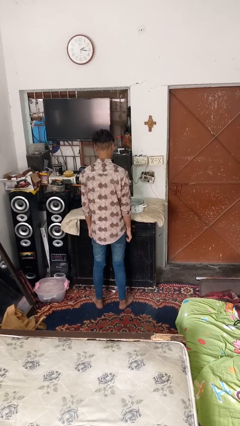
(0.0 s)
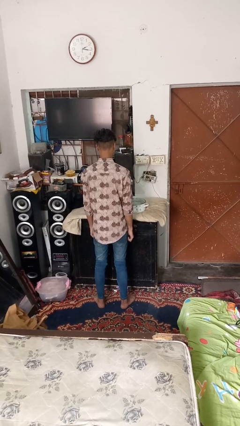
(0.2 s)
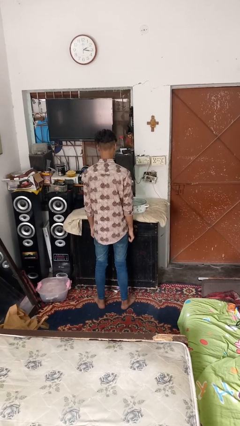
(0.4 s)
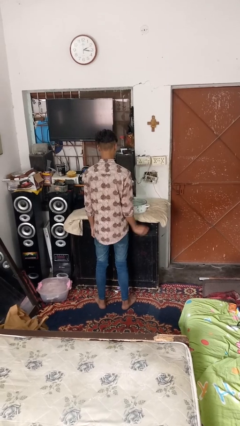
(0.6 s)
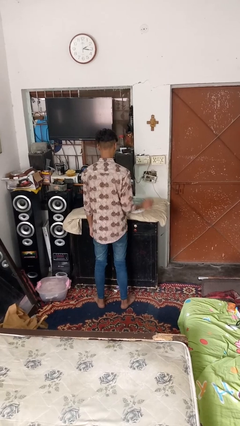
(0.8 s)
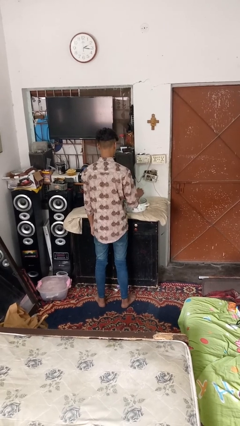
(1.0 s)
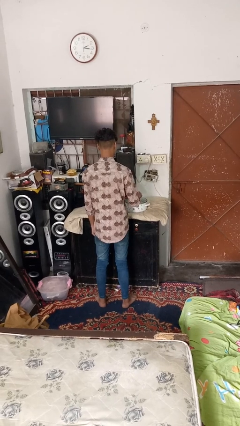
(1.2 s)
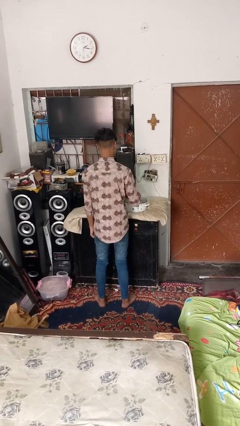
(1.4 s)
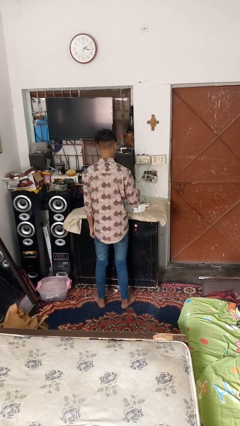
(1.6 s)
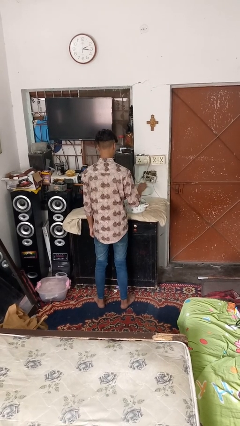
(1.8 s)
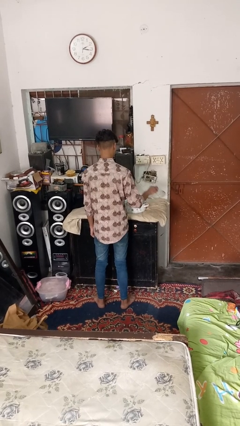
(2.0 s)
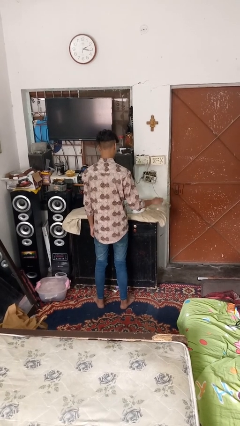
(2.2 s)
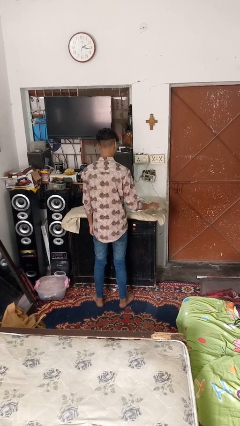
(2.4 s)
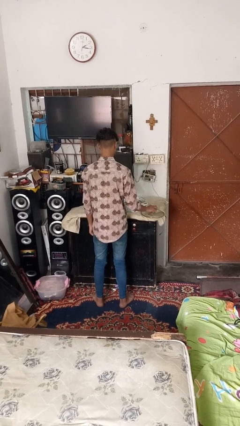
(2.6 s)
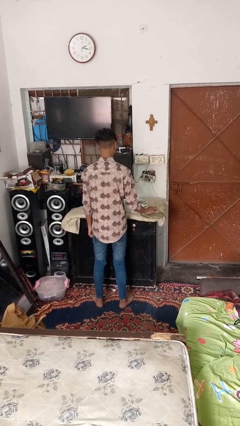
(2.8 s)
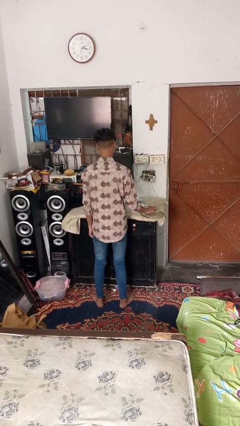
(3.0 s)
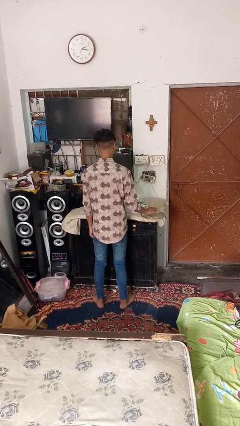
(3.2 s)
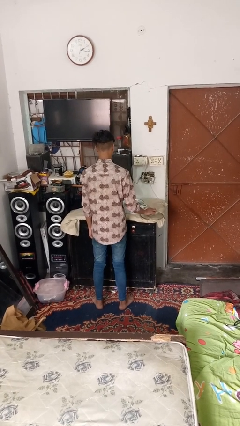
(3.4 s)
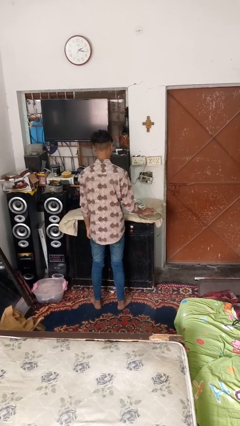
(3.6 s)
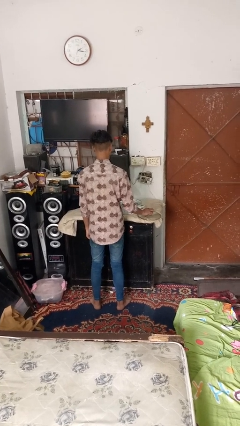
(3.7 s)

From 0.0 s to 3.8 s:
person opens jar

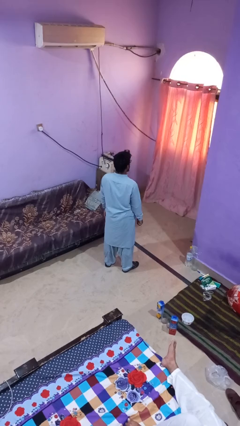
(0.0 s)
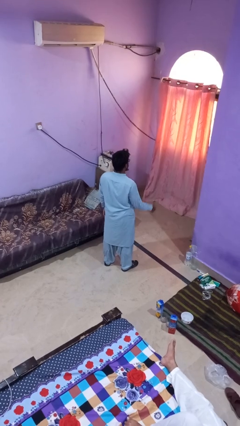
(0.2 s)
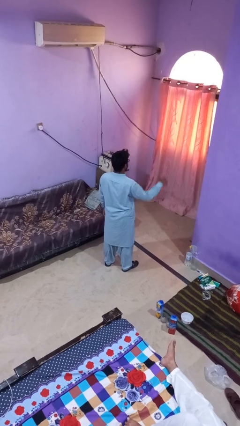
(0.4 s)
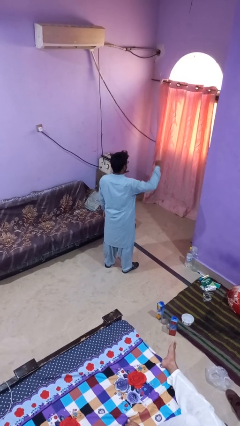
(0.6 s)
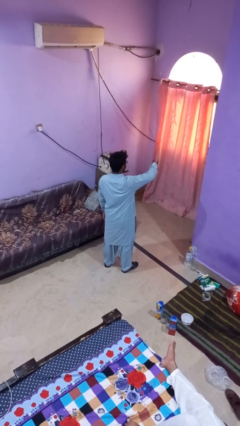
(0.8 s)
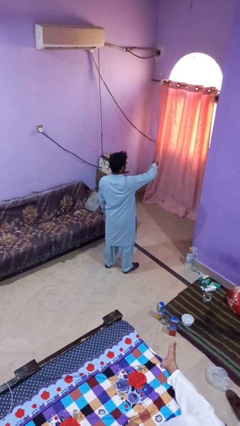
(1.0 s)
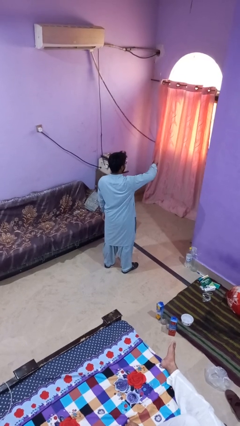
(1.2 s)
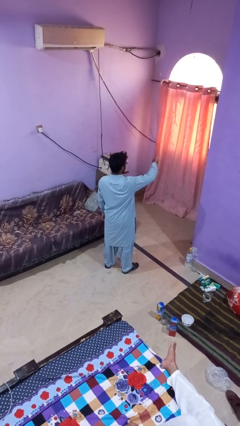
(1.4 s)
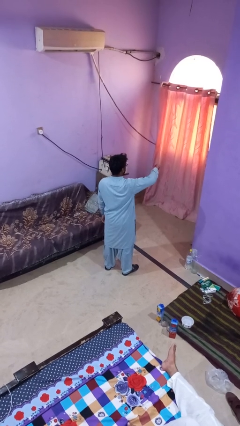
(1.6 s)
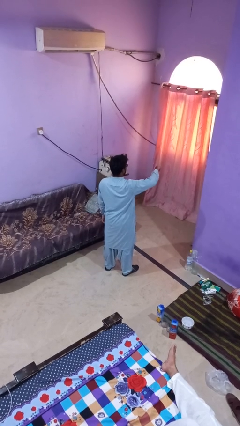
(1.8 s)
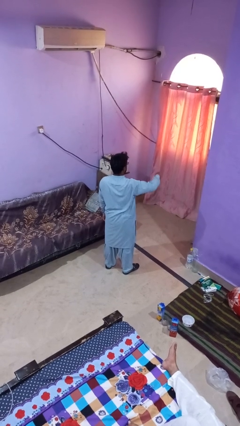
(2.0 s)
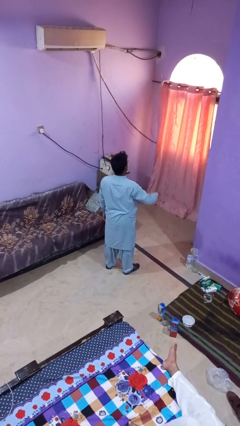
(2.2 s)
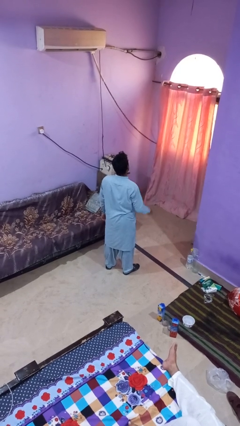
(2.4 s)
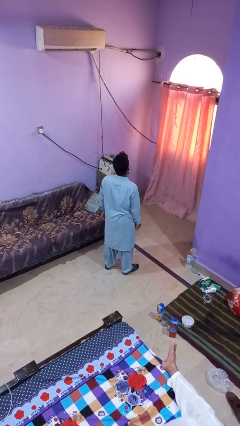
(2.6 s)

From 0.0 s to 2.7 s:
person gestures thumbs down

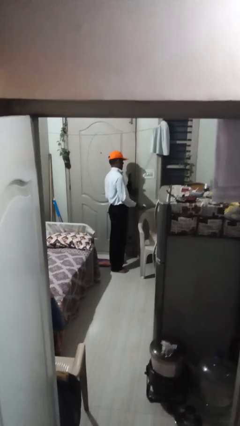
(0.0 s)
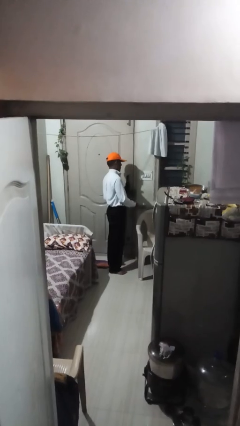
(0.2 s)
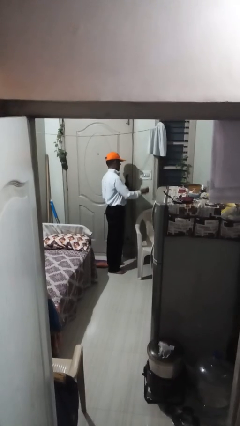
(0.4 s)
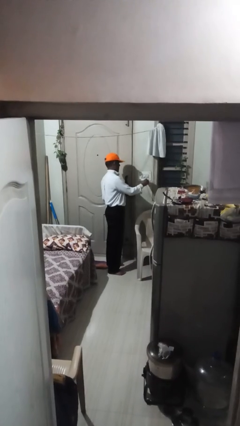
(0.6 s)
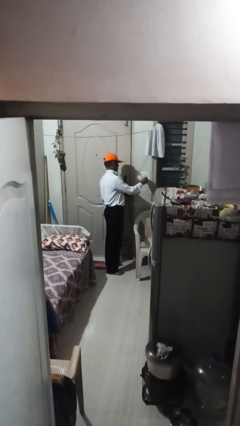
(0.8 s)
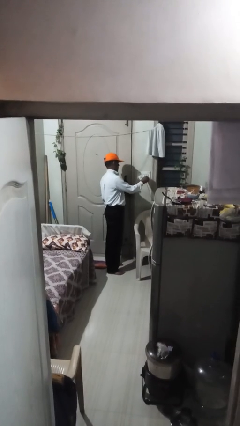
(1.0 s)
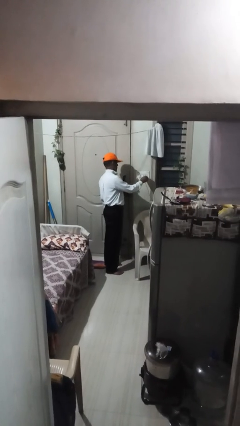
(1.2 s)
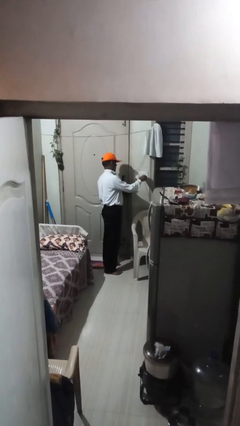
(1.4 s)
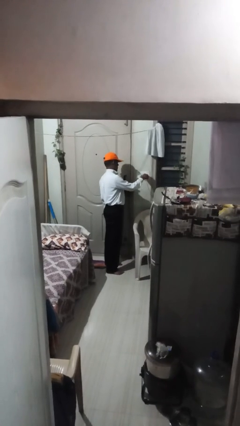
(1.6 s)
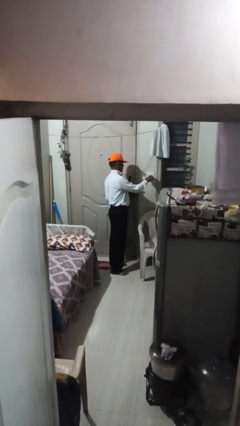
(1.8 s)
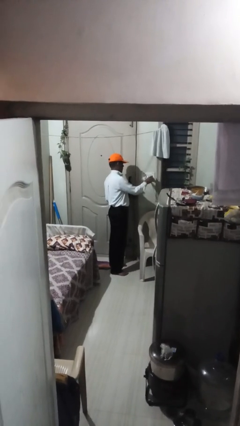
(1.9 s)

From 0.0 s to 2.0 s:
person plugs into electrical socket

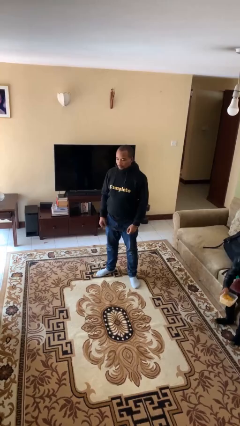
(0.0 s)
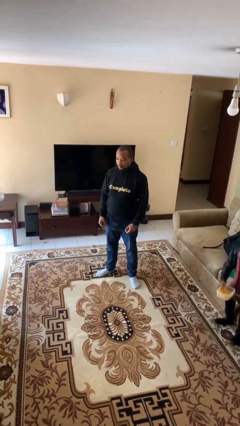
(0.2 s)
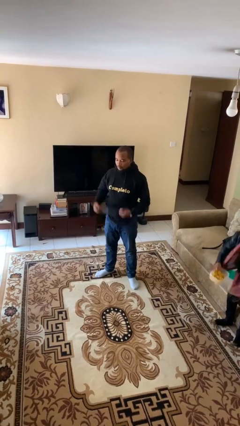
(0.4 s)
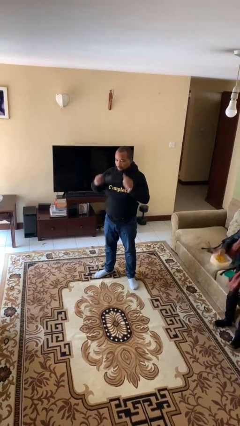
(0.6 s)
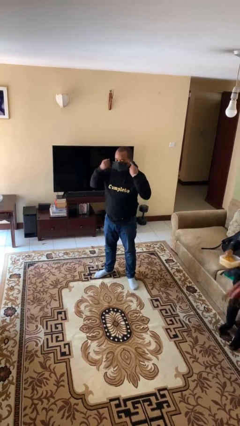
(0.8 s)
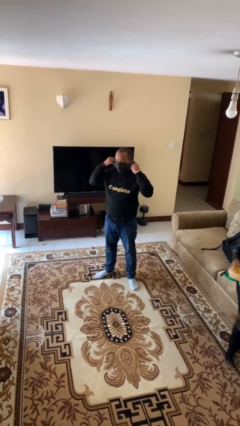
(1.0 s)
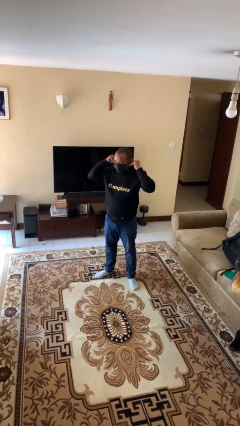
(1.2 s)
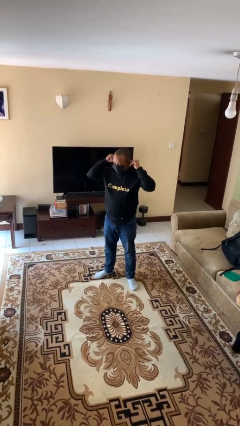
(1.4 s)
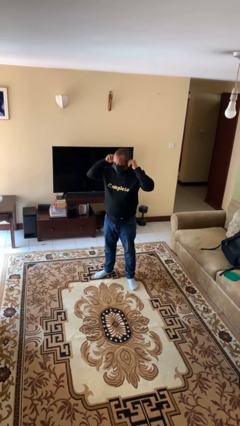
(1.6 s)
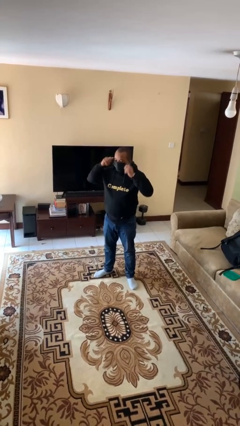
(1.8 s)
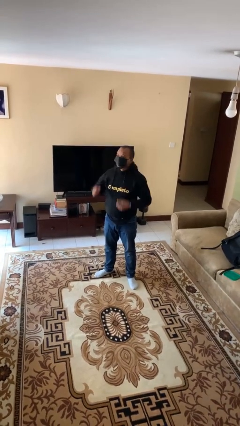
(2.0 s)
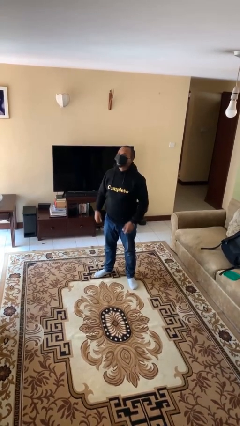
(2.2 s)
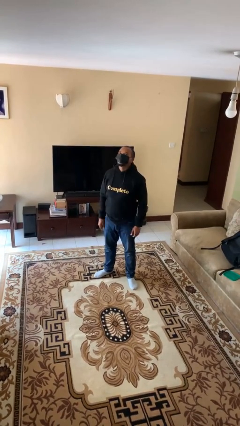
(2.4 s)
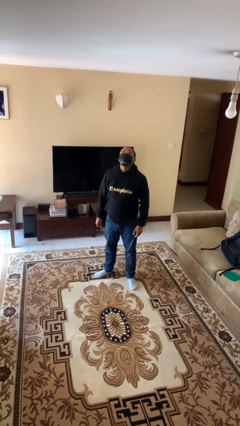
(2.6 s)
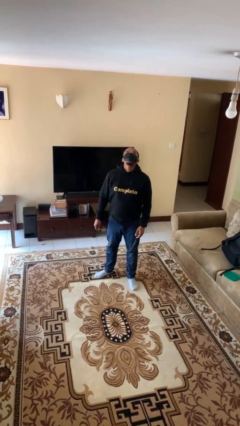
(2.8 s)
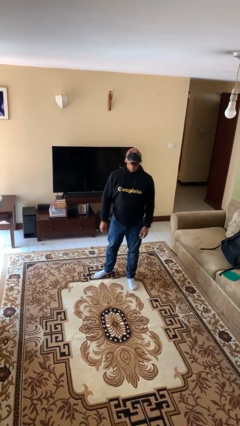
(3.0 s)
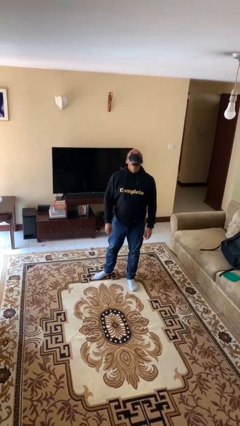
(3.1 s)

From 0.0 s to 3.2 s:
person puts on facemask

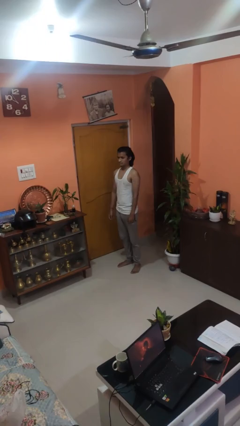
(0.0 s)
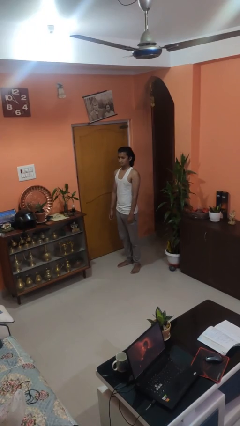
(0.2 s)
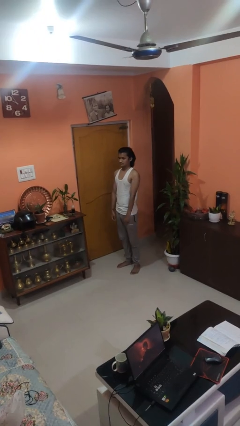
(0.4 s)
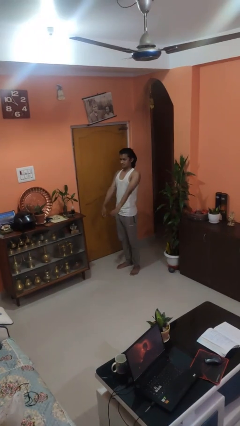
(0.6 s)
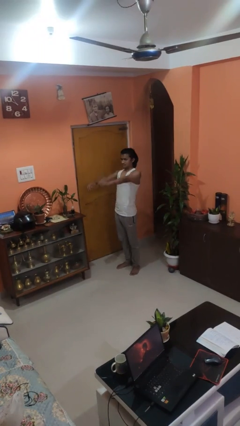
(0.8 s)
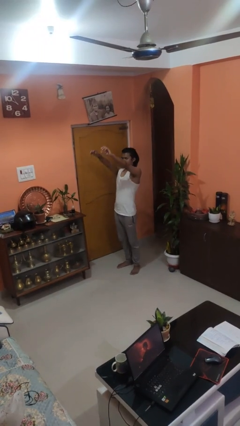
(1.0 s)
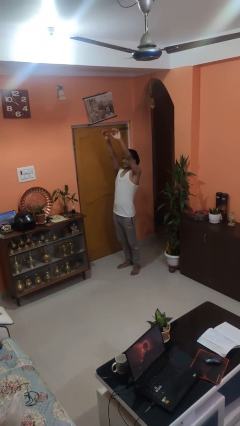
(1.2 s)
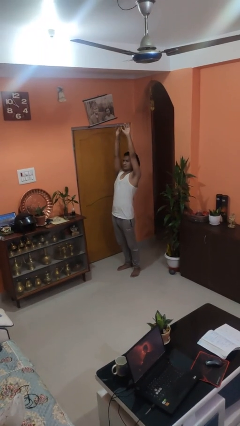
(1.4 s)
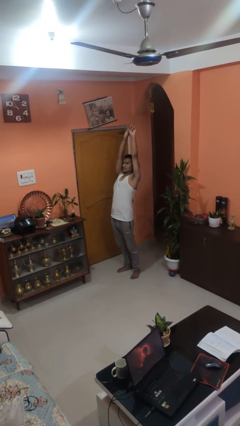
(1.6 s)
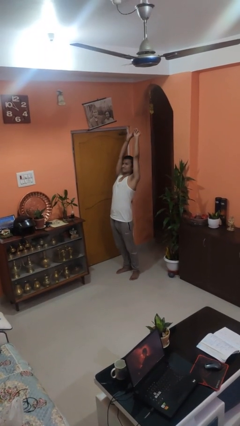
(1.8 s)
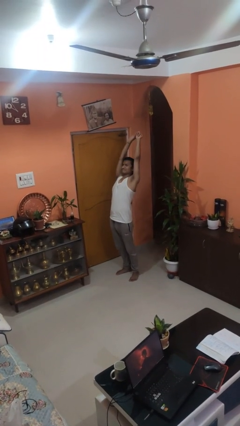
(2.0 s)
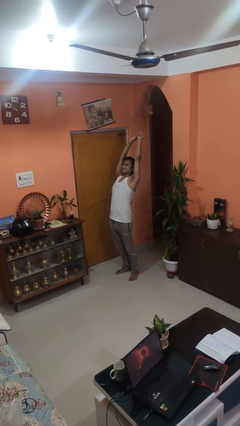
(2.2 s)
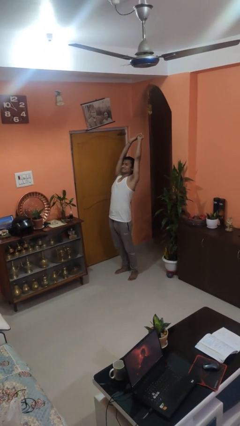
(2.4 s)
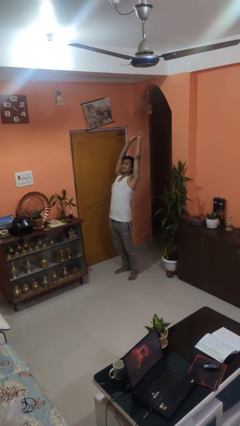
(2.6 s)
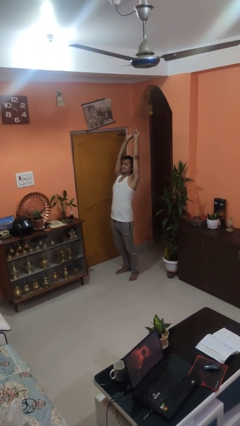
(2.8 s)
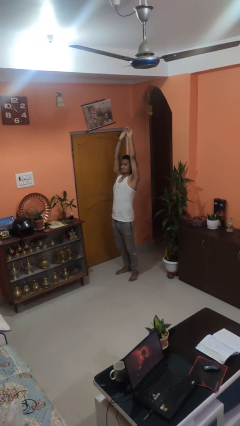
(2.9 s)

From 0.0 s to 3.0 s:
person stretches arms over head

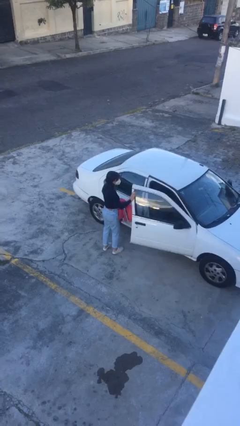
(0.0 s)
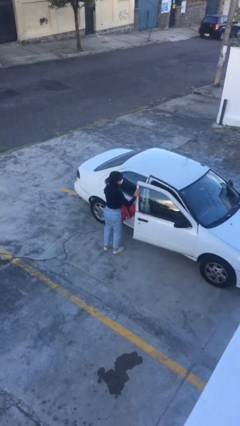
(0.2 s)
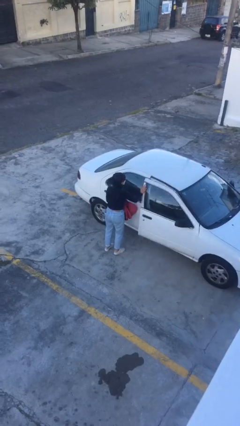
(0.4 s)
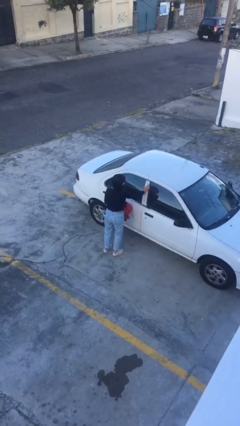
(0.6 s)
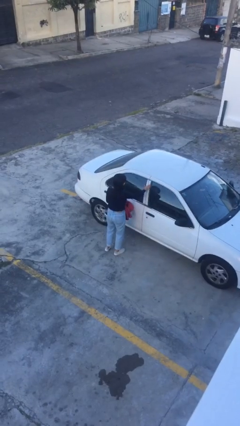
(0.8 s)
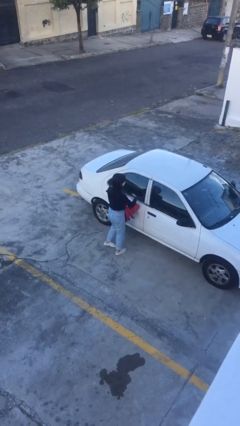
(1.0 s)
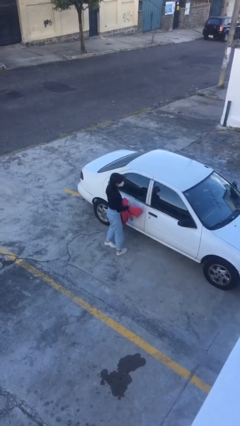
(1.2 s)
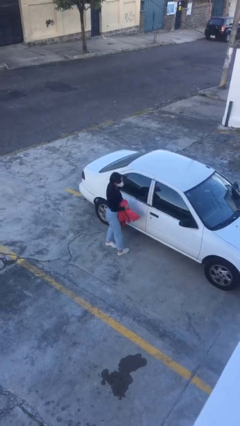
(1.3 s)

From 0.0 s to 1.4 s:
person closes car door

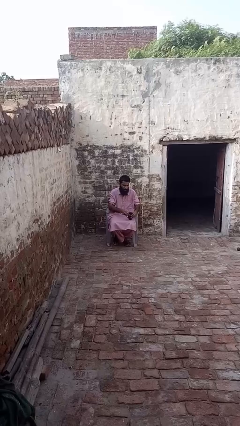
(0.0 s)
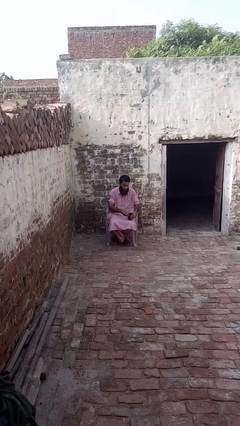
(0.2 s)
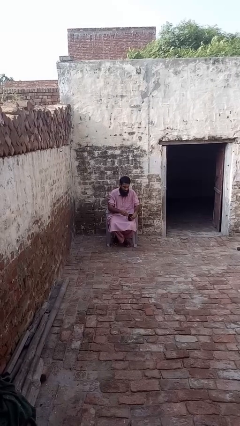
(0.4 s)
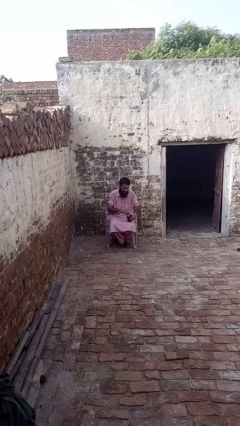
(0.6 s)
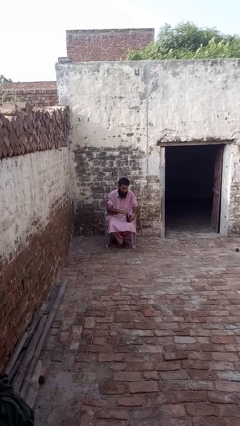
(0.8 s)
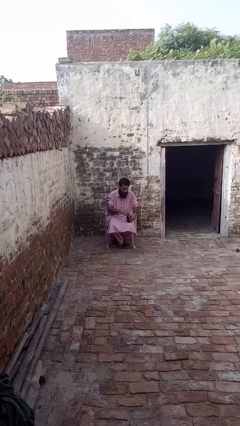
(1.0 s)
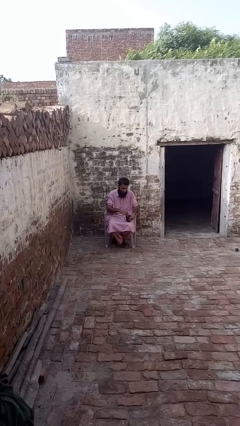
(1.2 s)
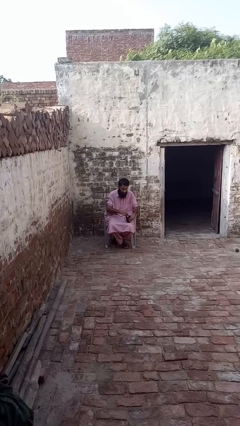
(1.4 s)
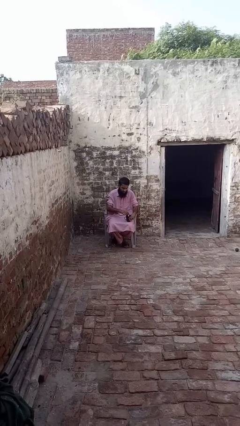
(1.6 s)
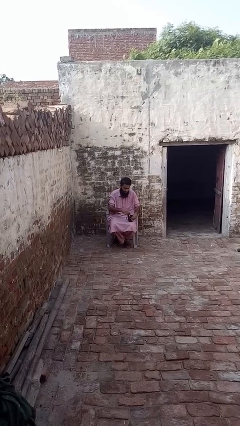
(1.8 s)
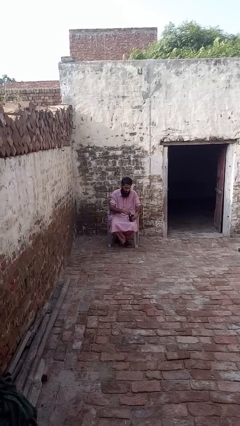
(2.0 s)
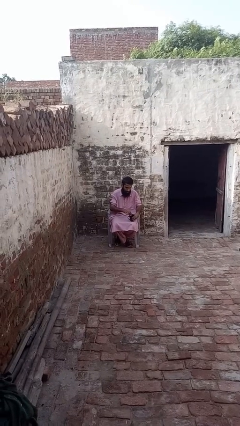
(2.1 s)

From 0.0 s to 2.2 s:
person stirs mug